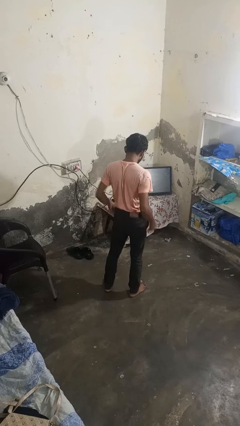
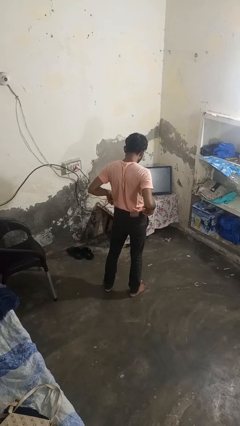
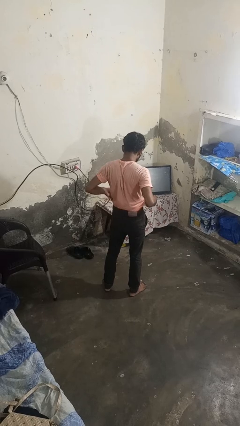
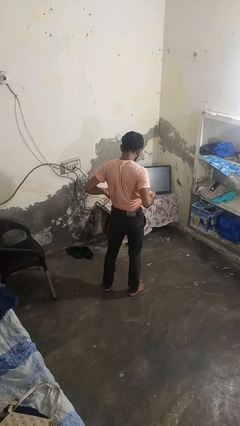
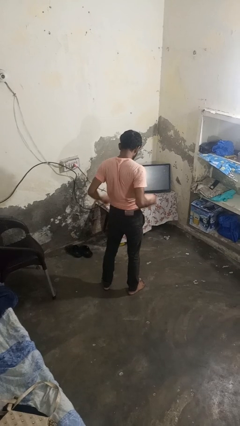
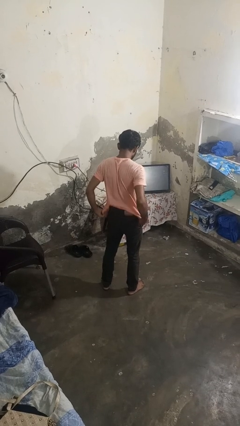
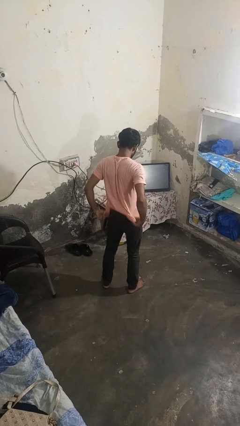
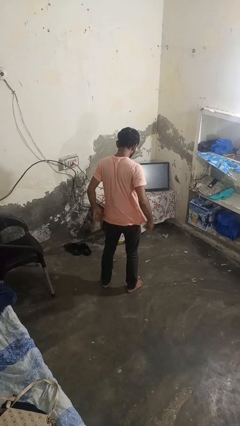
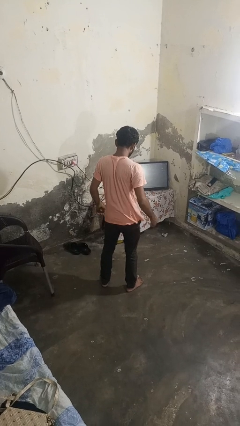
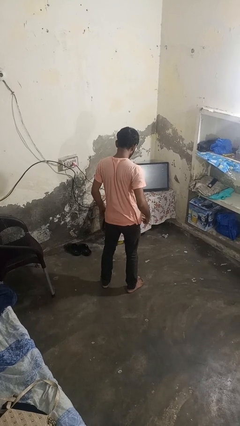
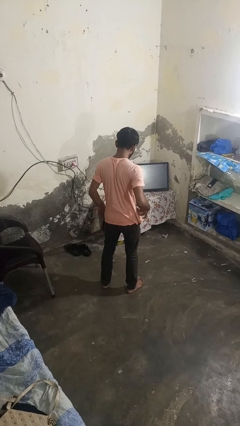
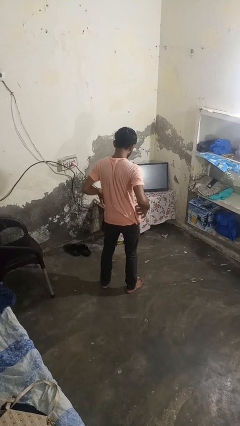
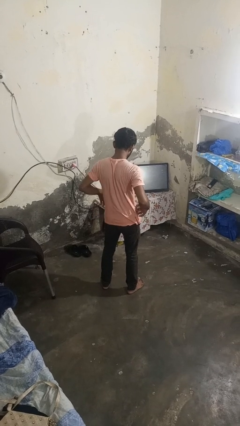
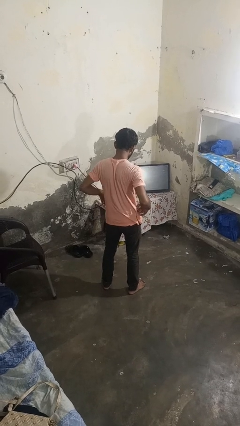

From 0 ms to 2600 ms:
person untucks shirt

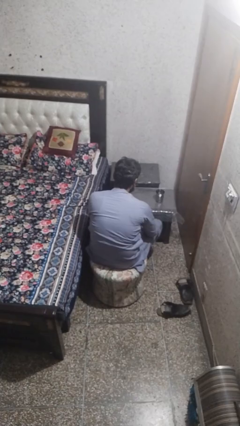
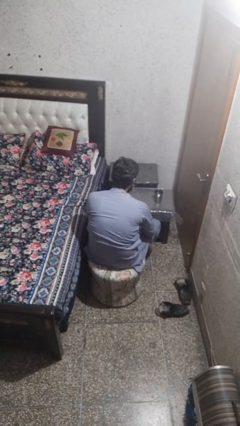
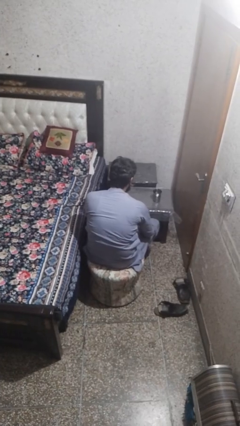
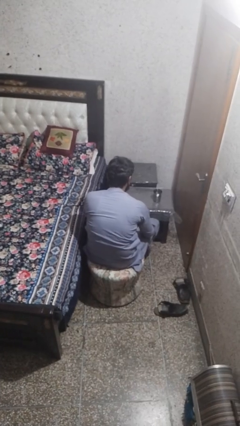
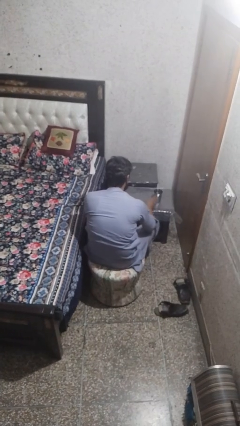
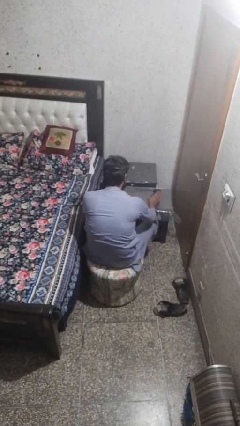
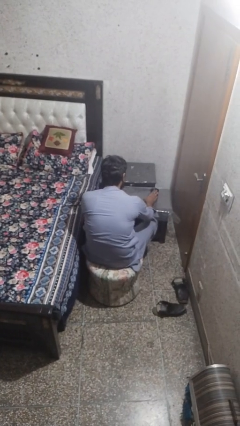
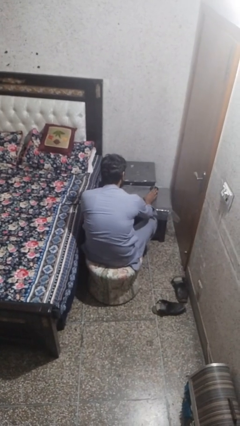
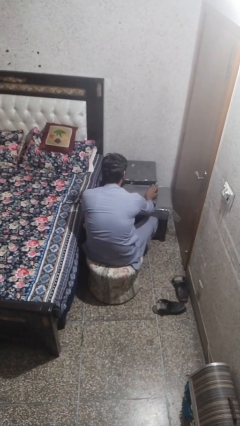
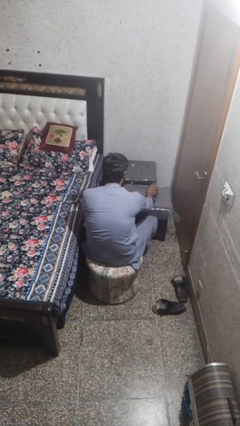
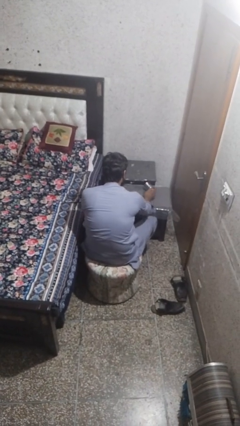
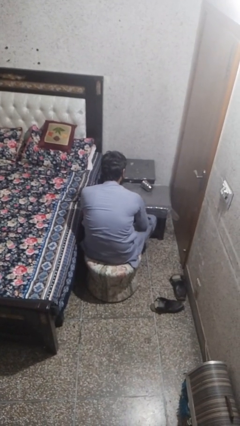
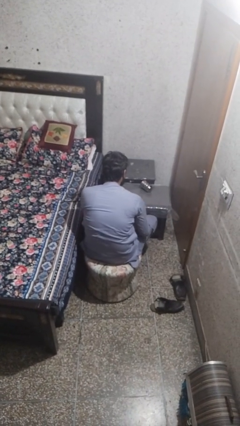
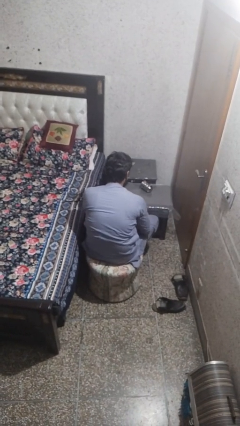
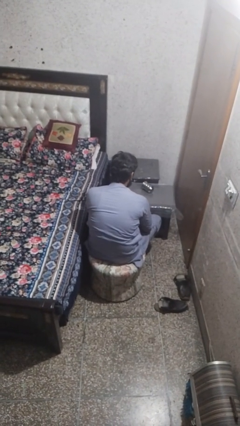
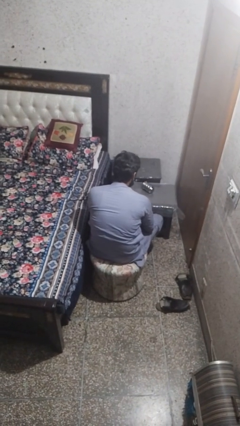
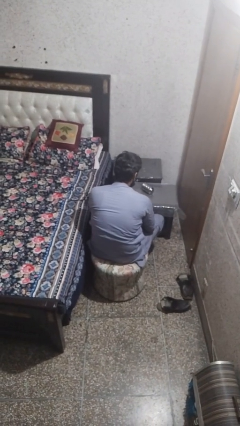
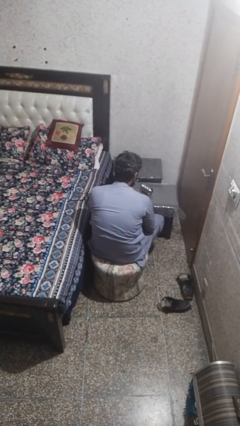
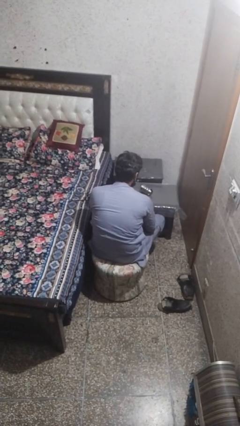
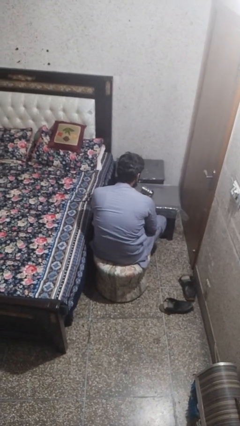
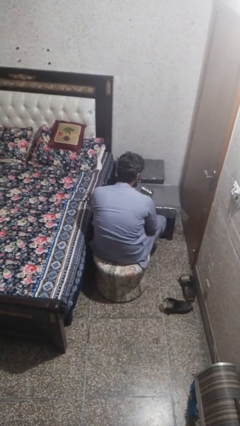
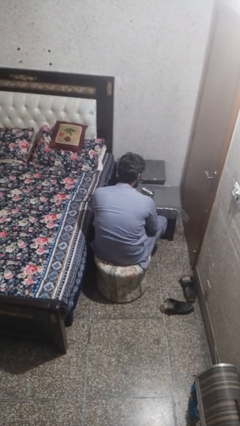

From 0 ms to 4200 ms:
person knocks over glass

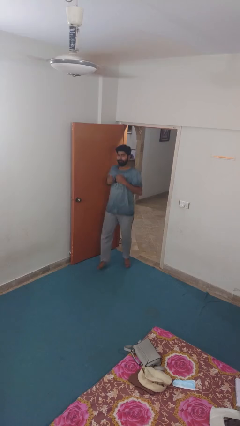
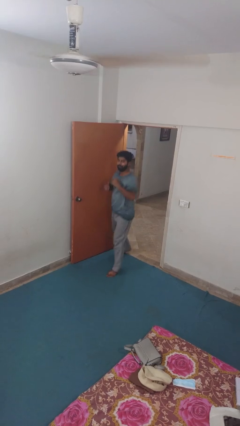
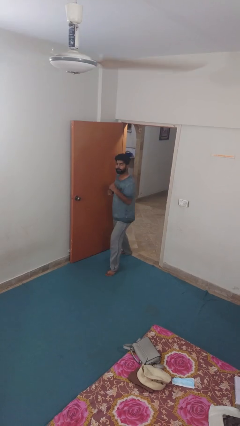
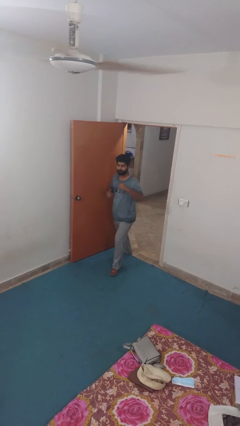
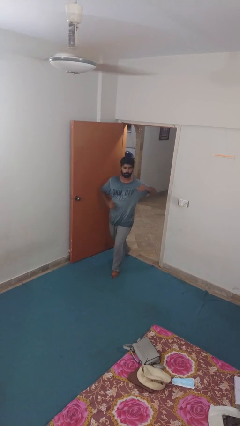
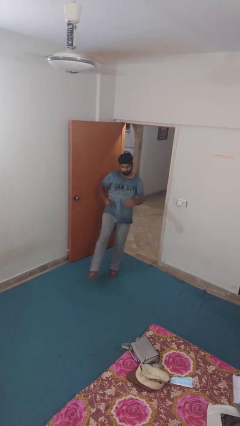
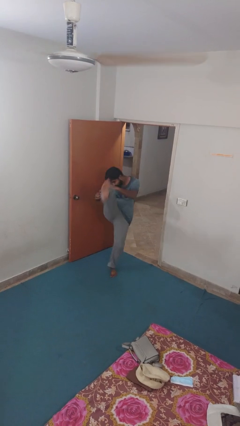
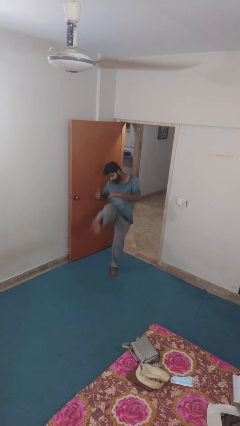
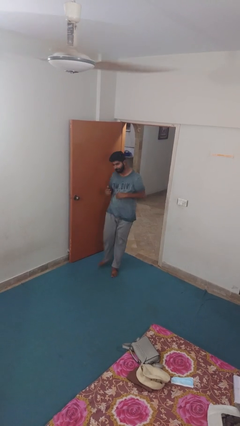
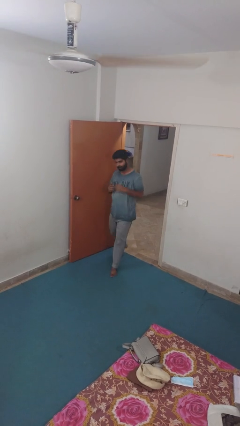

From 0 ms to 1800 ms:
person karate kicks

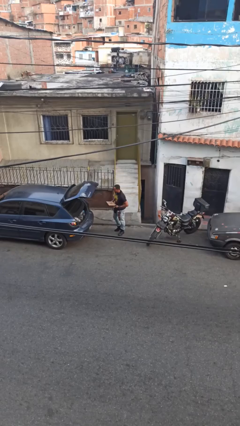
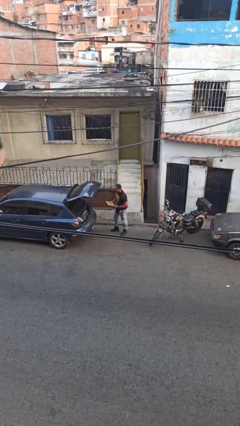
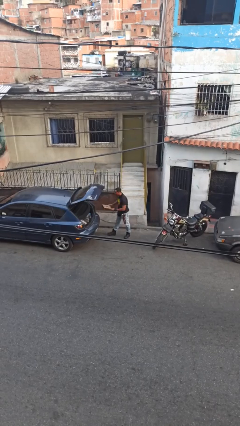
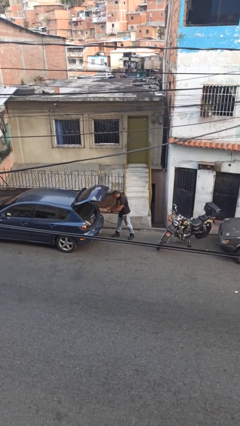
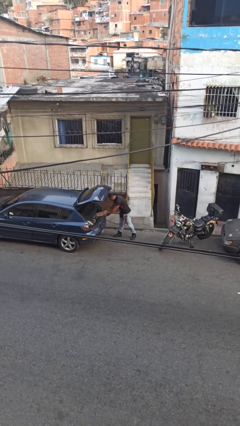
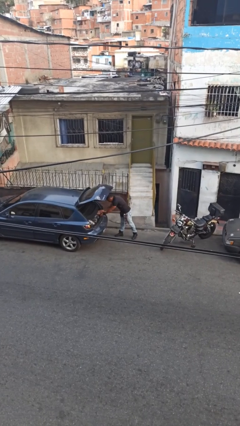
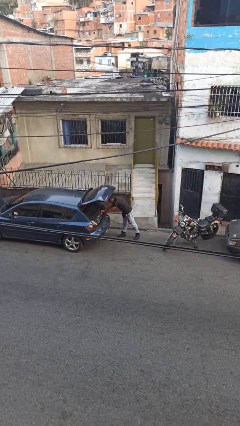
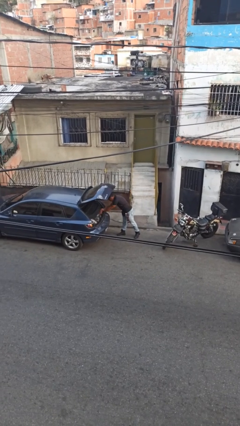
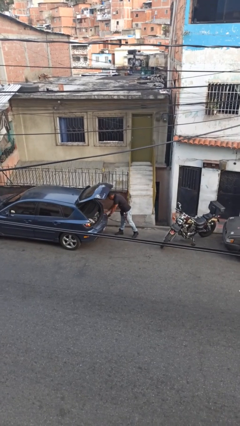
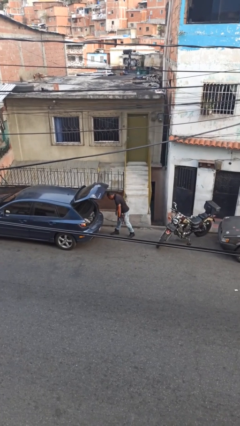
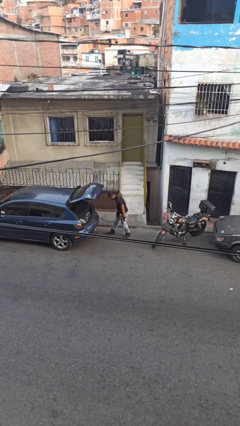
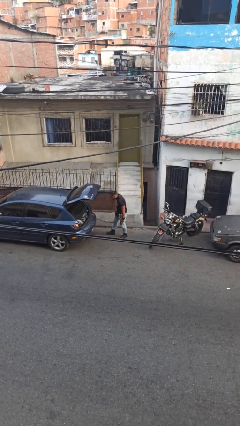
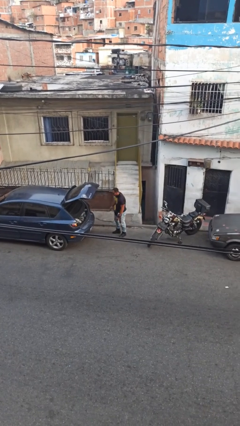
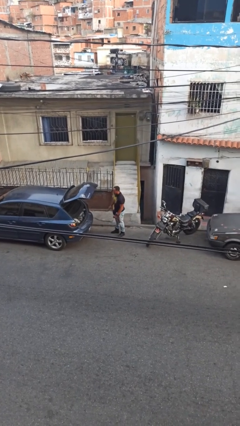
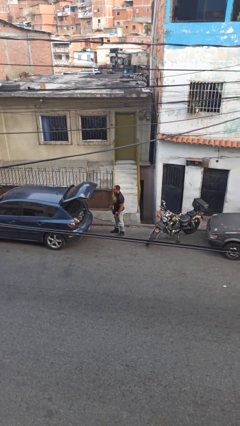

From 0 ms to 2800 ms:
person loads car

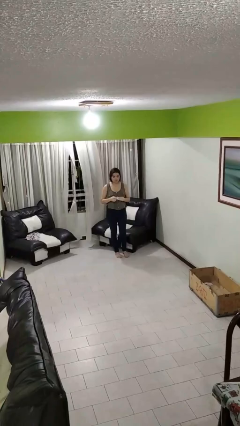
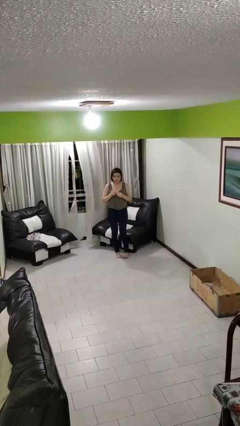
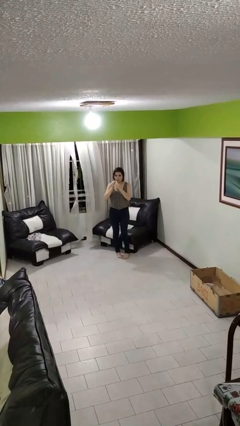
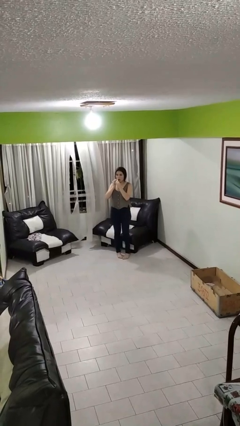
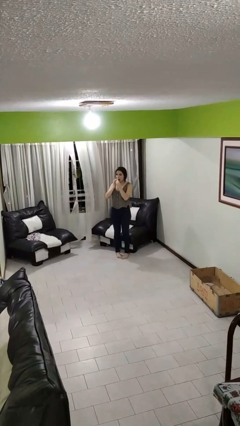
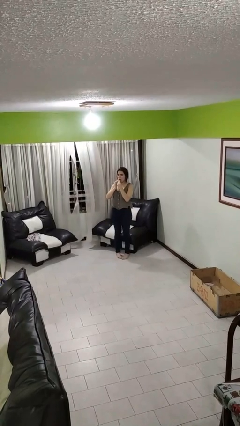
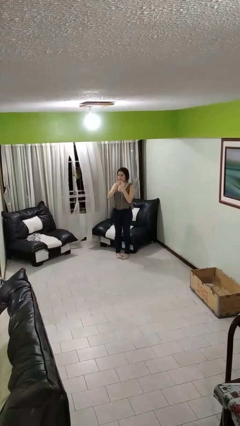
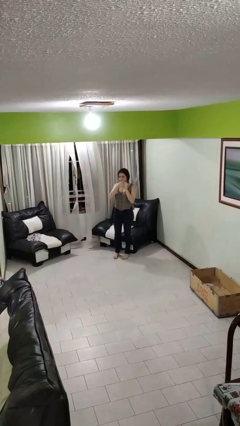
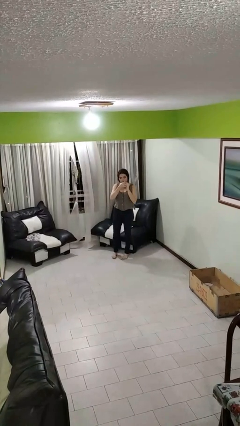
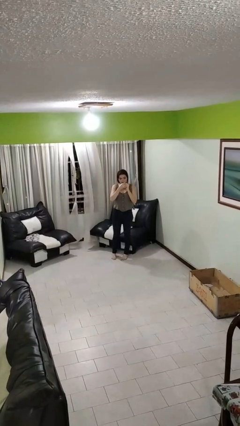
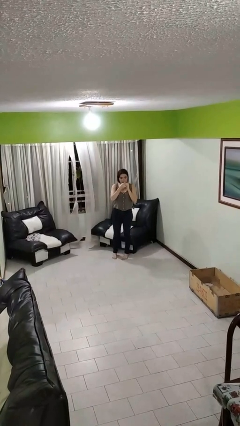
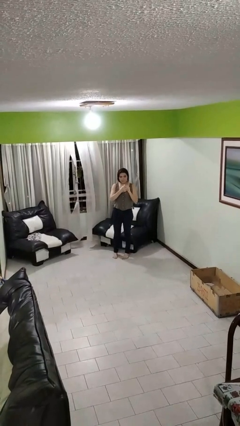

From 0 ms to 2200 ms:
person wipes mouth with napkin

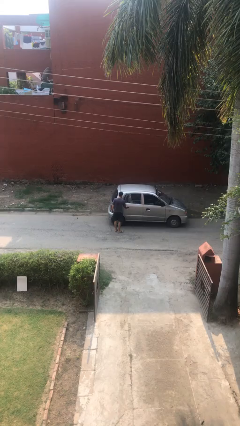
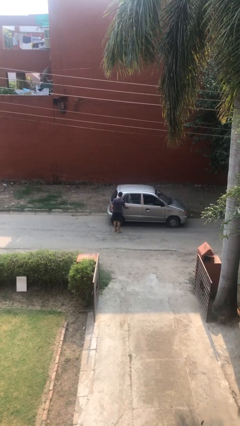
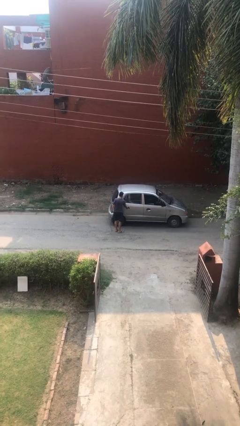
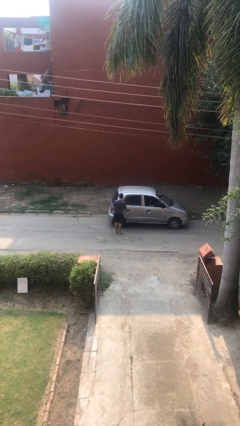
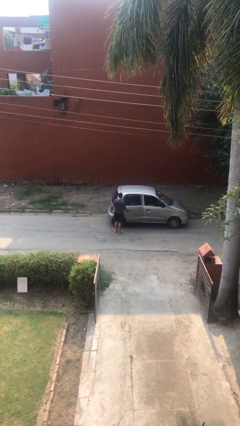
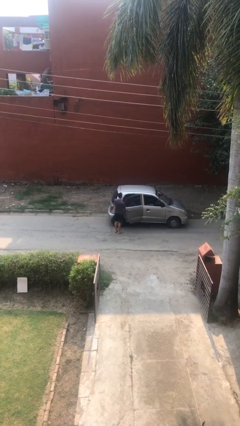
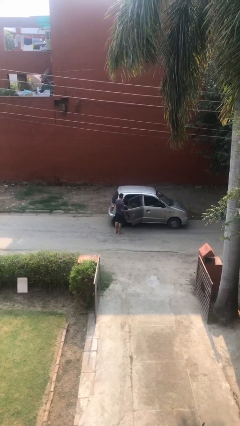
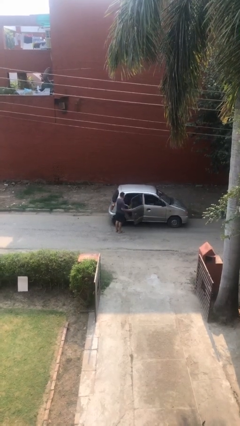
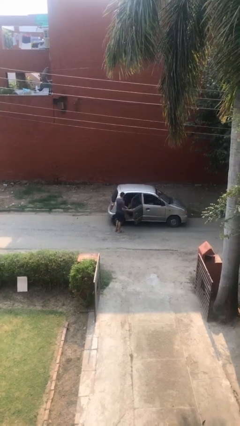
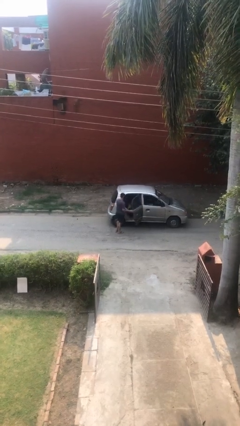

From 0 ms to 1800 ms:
person opens car door

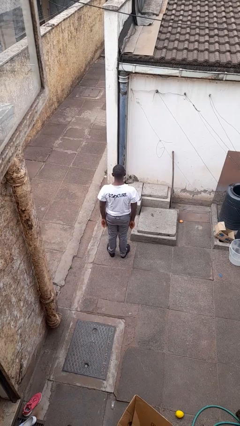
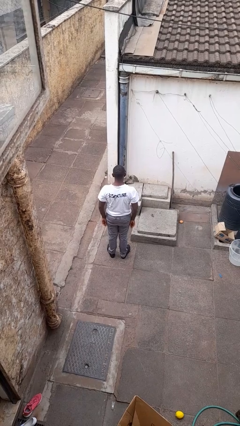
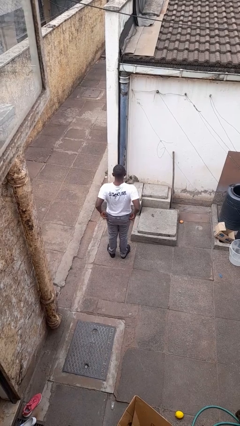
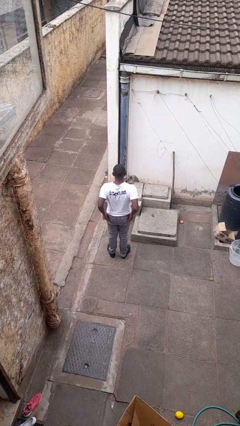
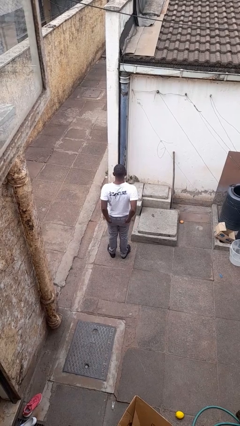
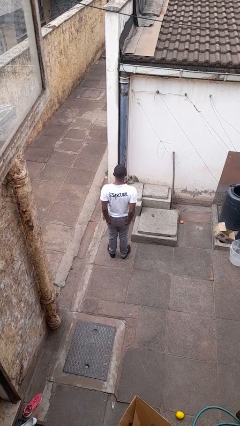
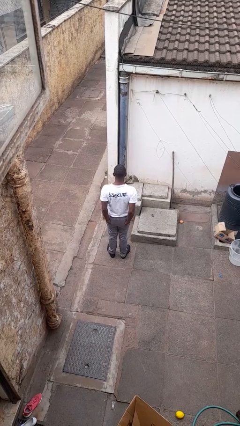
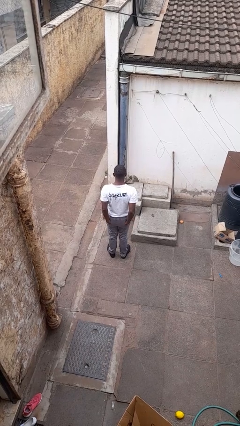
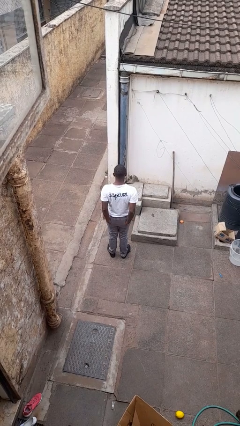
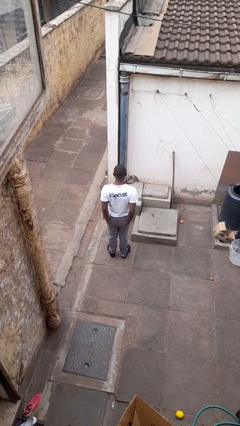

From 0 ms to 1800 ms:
person puts hands in back pockets
